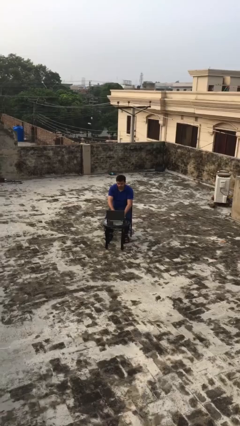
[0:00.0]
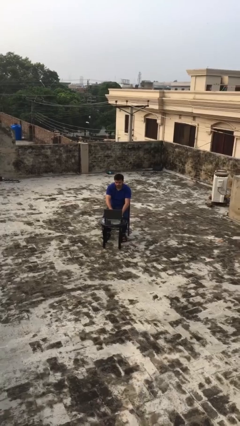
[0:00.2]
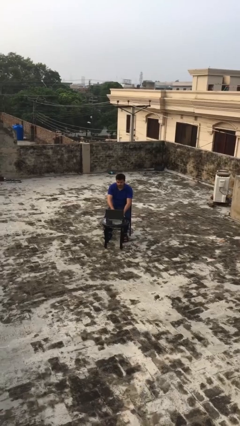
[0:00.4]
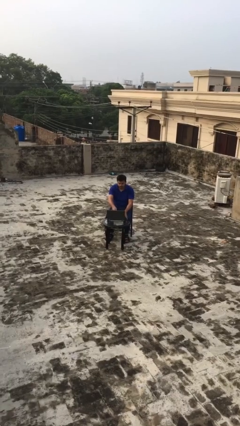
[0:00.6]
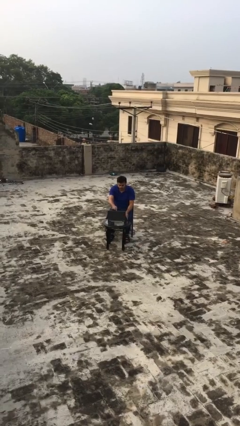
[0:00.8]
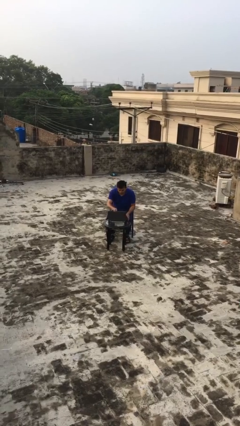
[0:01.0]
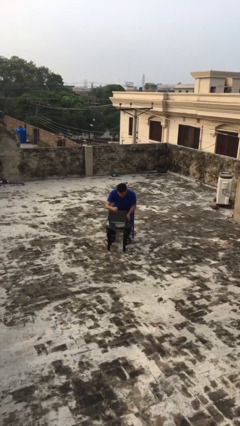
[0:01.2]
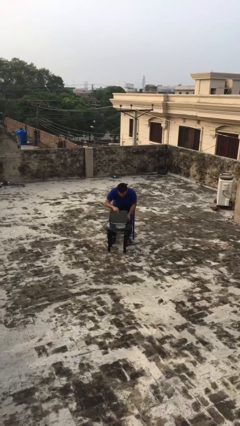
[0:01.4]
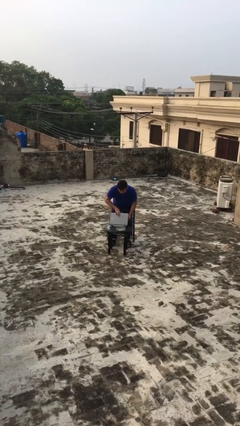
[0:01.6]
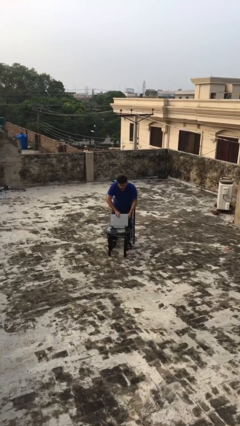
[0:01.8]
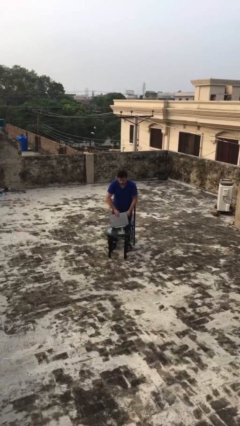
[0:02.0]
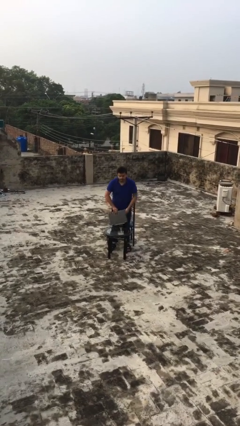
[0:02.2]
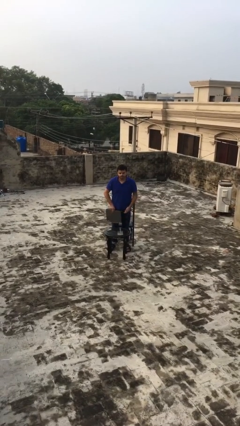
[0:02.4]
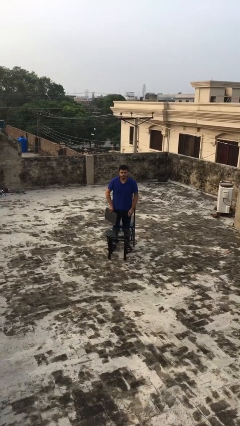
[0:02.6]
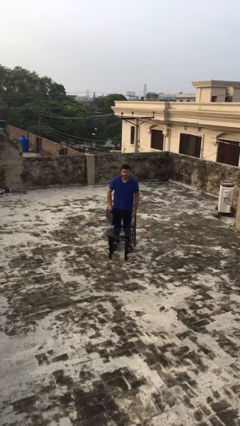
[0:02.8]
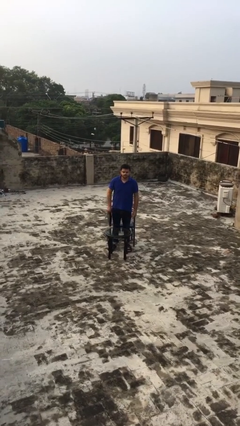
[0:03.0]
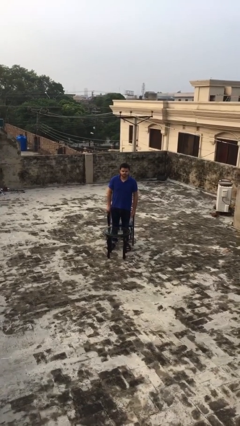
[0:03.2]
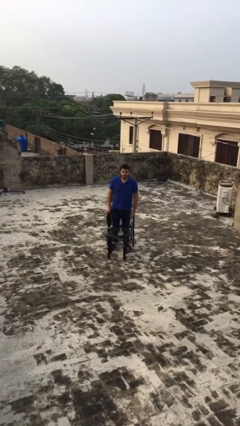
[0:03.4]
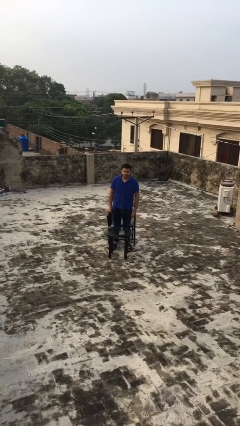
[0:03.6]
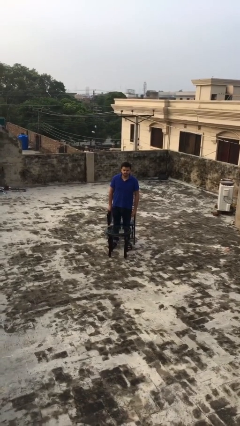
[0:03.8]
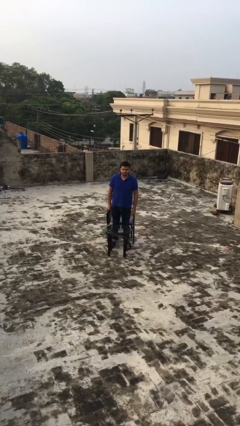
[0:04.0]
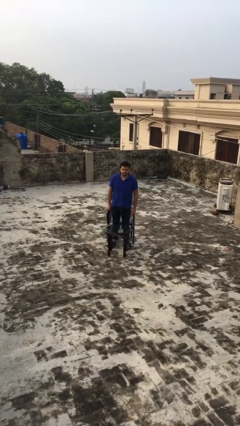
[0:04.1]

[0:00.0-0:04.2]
person stands up

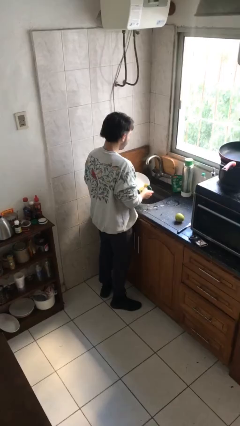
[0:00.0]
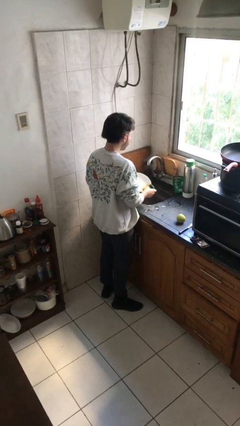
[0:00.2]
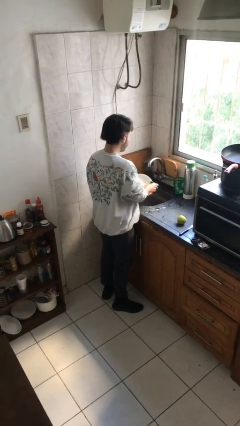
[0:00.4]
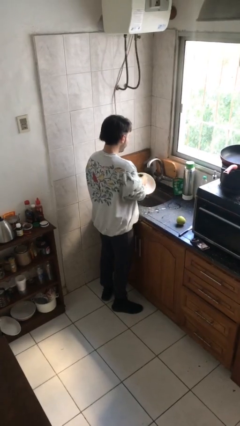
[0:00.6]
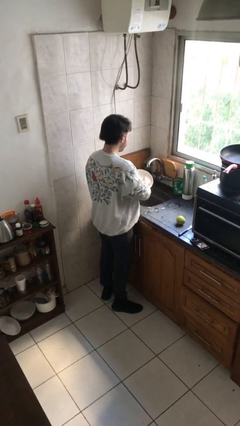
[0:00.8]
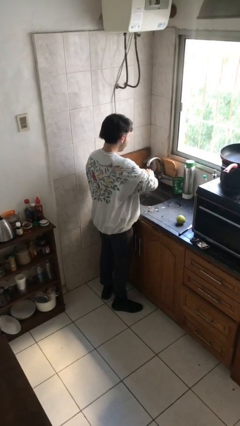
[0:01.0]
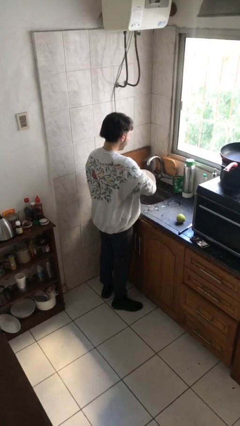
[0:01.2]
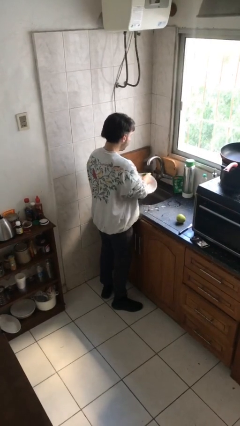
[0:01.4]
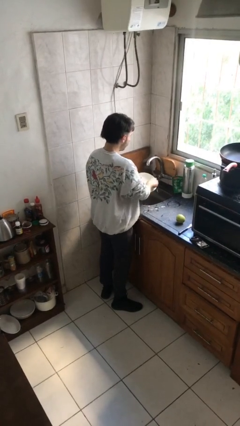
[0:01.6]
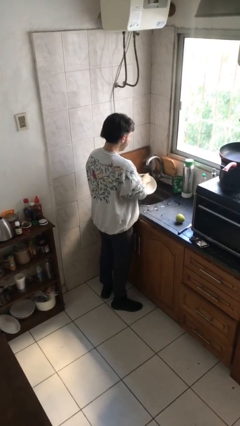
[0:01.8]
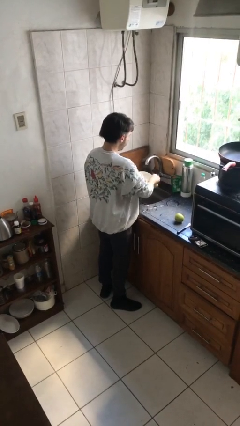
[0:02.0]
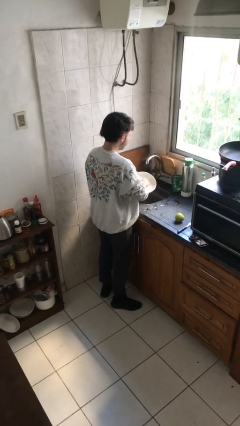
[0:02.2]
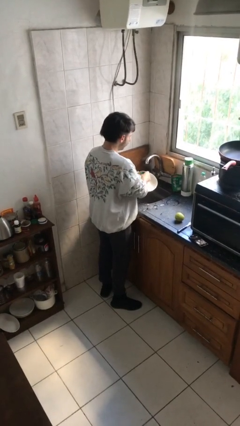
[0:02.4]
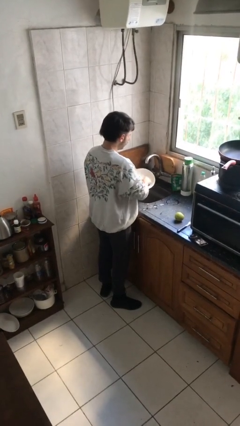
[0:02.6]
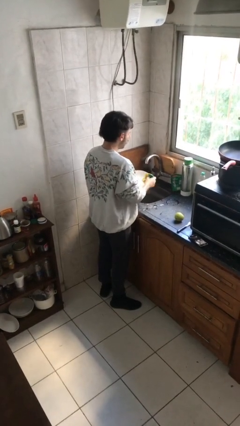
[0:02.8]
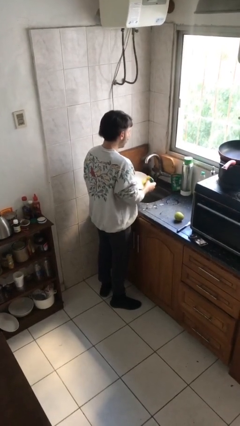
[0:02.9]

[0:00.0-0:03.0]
person washes dish

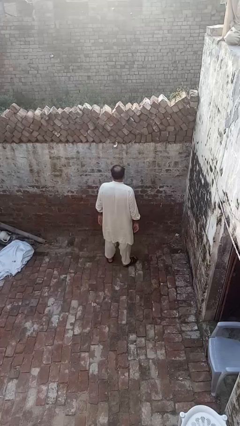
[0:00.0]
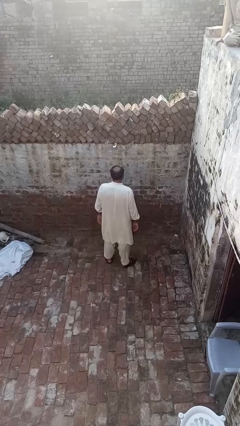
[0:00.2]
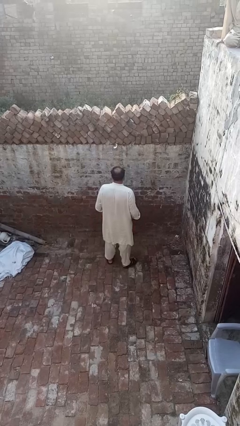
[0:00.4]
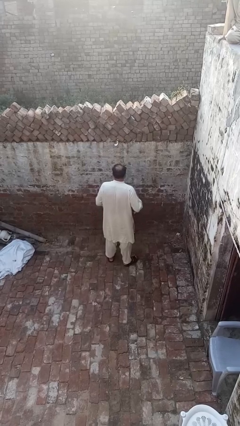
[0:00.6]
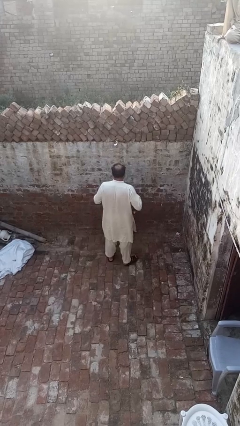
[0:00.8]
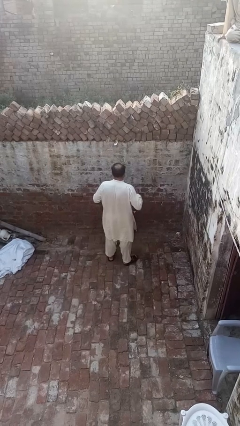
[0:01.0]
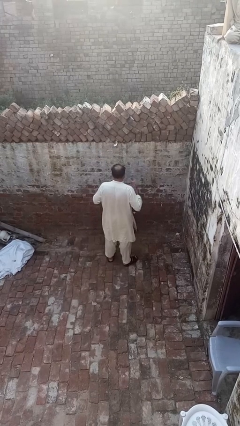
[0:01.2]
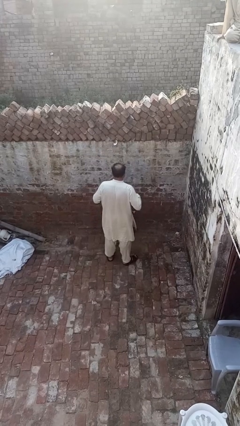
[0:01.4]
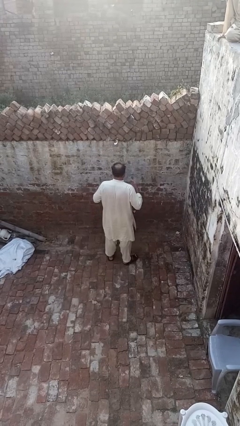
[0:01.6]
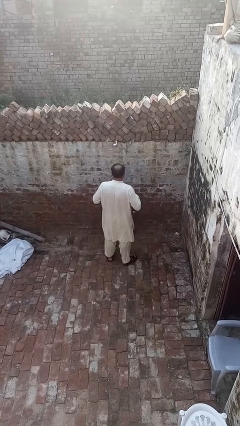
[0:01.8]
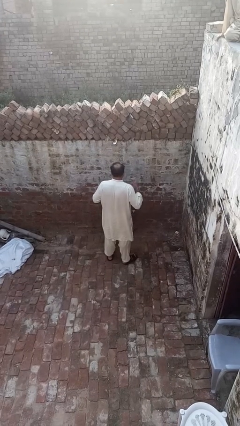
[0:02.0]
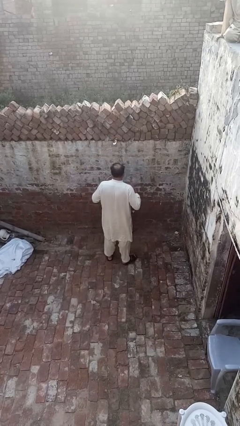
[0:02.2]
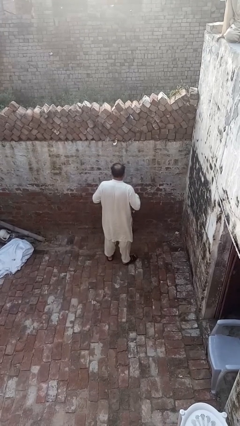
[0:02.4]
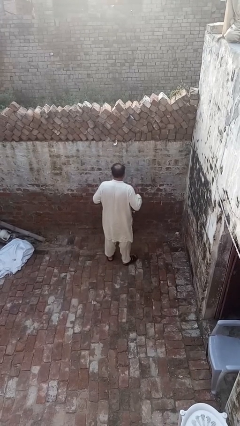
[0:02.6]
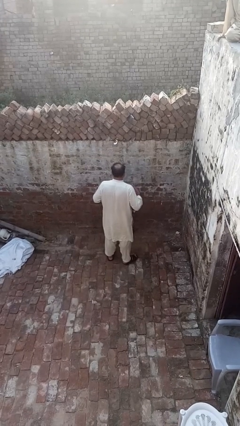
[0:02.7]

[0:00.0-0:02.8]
person drums on chest

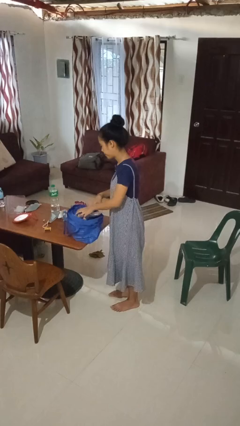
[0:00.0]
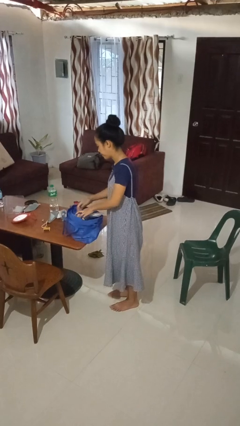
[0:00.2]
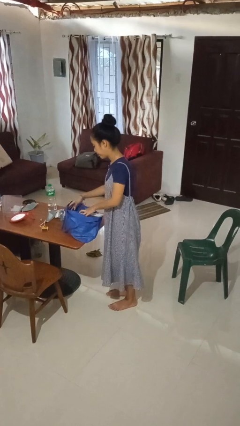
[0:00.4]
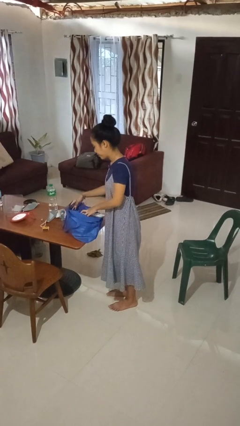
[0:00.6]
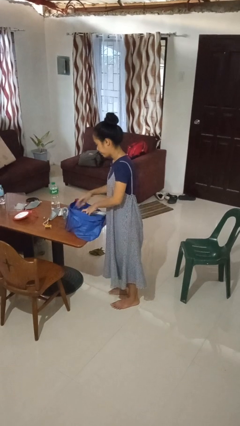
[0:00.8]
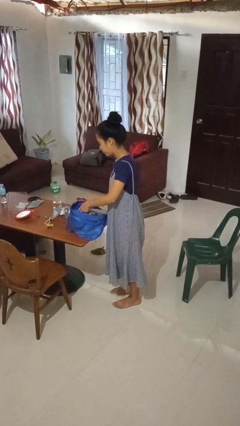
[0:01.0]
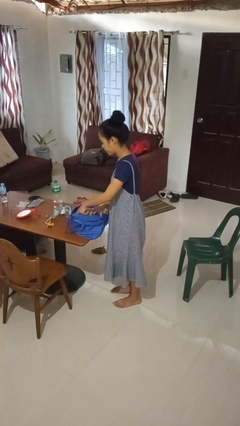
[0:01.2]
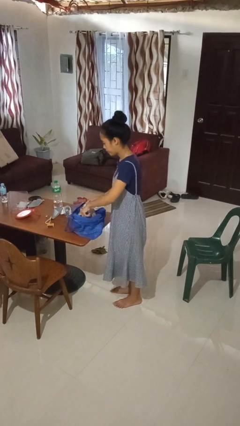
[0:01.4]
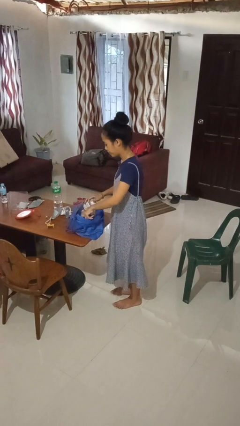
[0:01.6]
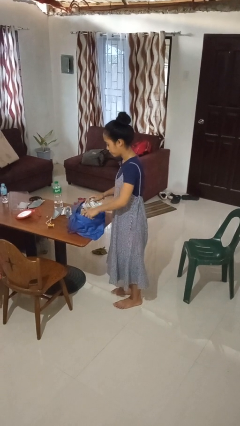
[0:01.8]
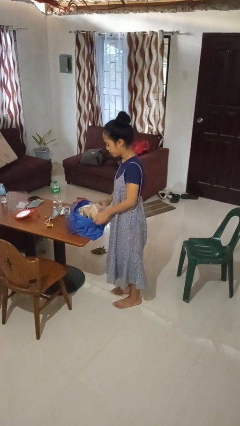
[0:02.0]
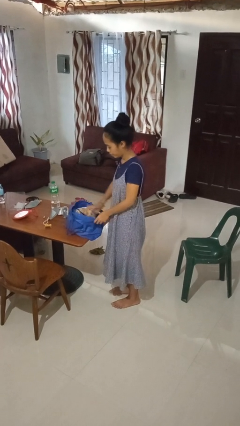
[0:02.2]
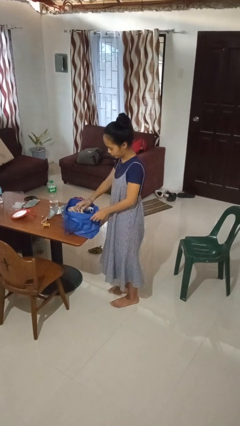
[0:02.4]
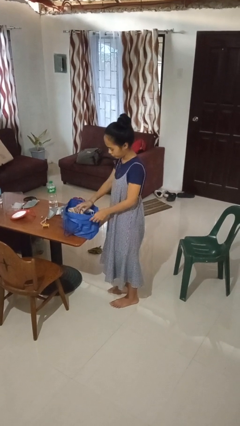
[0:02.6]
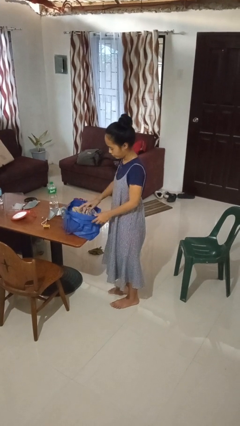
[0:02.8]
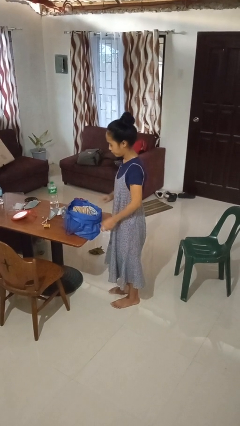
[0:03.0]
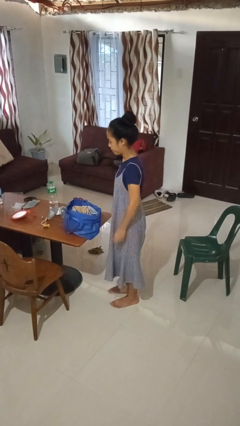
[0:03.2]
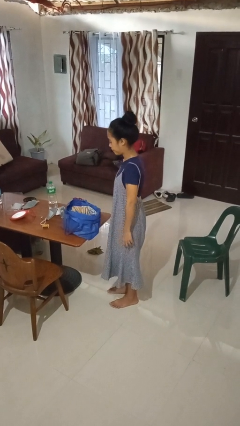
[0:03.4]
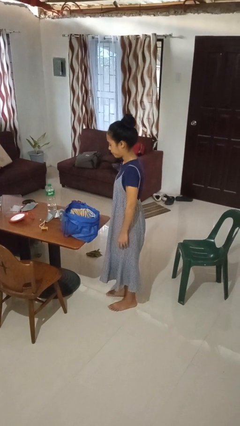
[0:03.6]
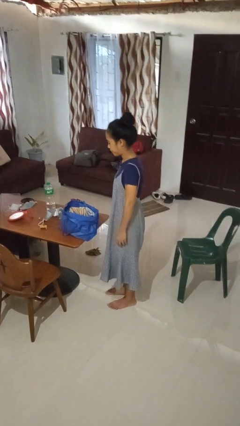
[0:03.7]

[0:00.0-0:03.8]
person searches in bag

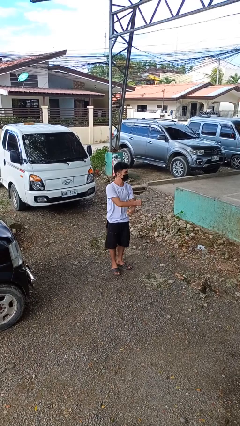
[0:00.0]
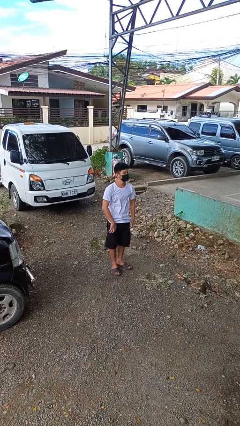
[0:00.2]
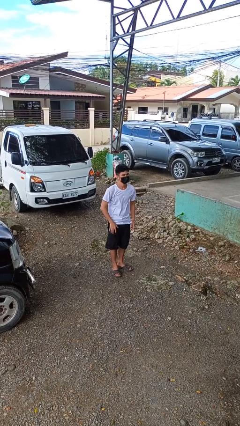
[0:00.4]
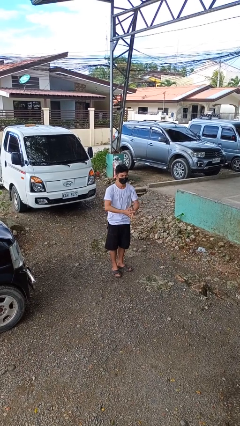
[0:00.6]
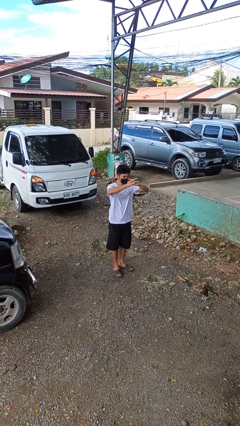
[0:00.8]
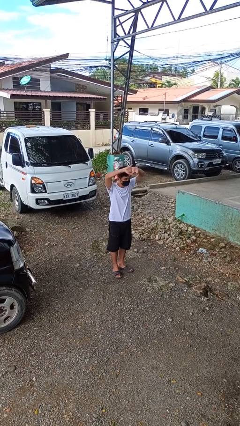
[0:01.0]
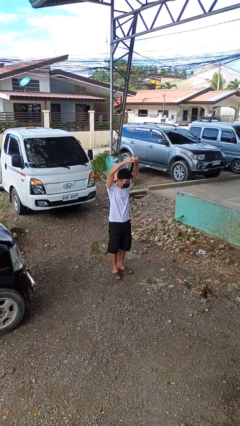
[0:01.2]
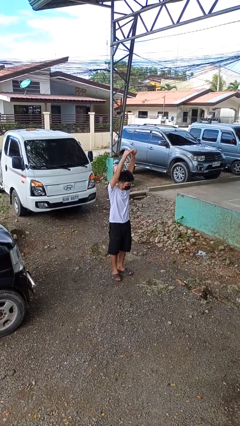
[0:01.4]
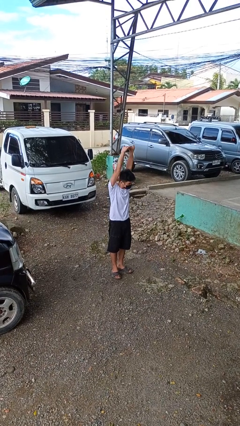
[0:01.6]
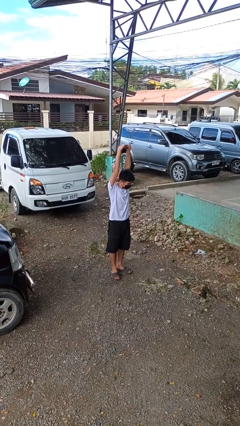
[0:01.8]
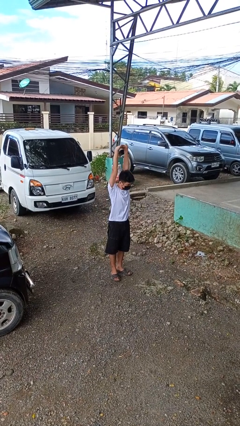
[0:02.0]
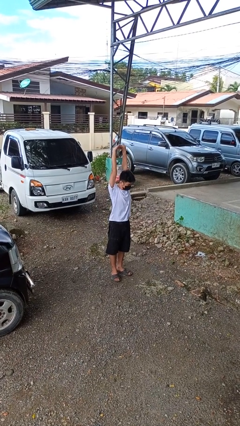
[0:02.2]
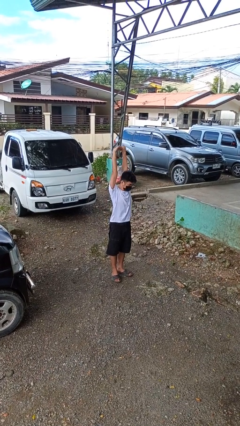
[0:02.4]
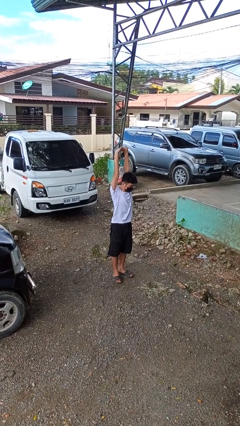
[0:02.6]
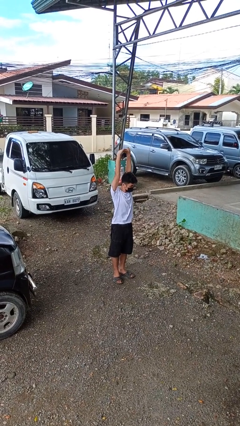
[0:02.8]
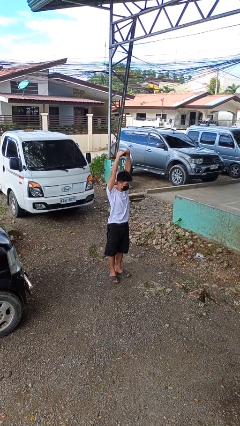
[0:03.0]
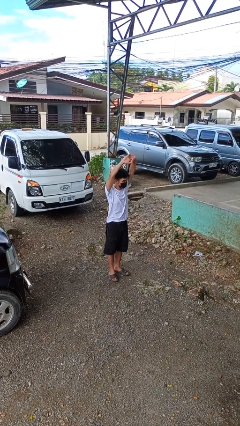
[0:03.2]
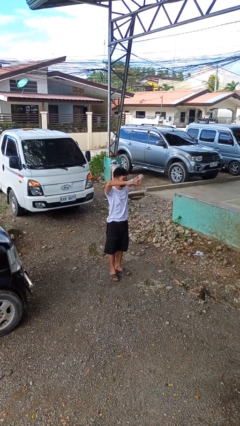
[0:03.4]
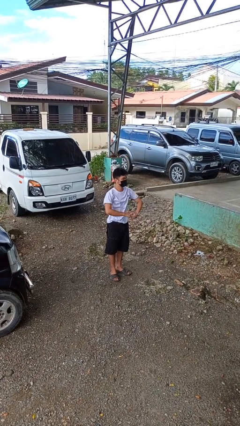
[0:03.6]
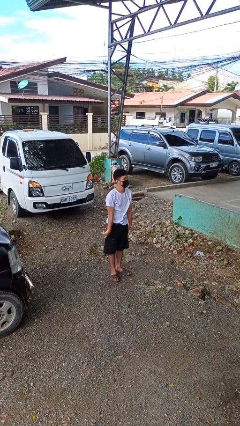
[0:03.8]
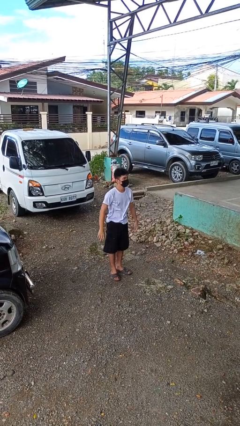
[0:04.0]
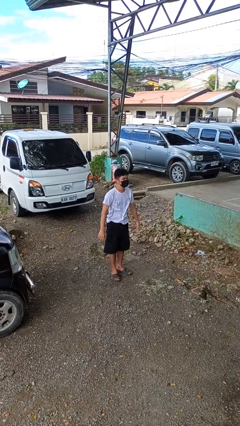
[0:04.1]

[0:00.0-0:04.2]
person stretches arms over head
